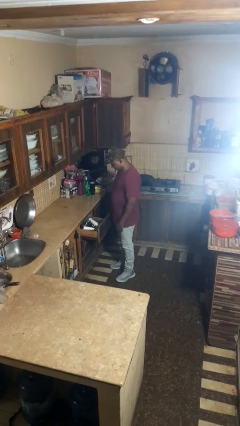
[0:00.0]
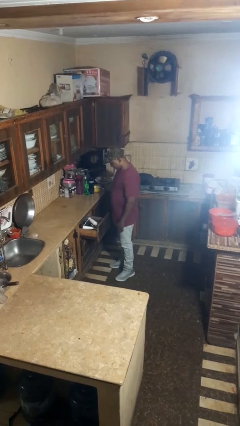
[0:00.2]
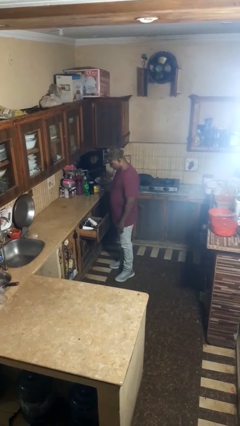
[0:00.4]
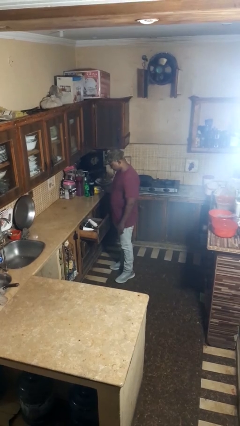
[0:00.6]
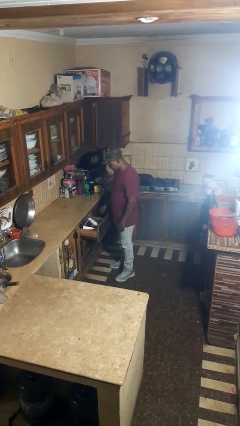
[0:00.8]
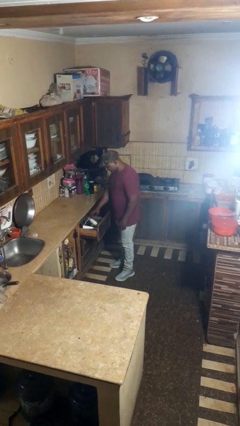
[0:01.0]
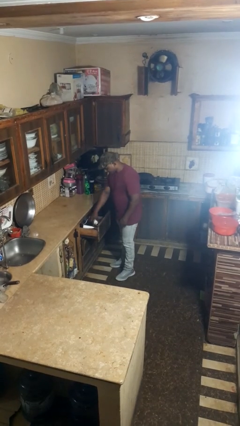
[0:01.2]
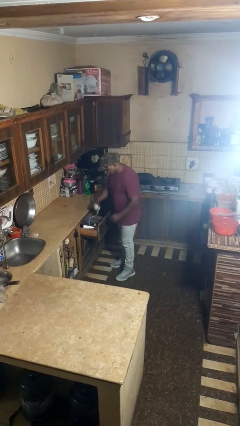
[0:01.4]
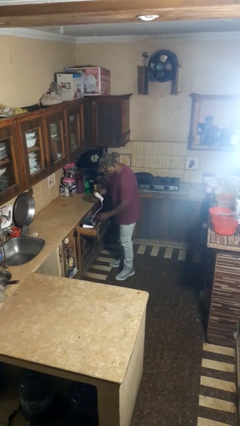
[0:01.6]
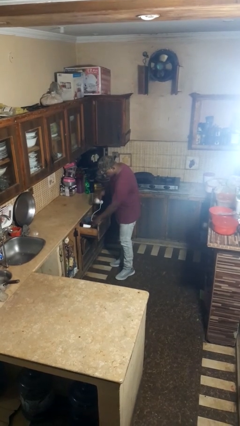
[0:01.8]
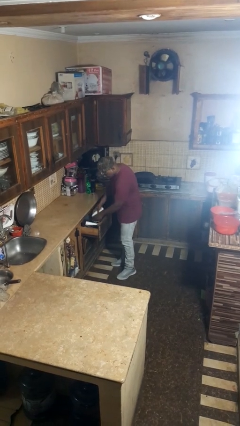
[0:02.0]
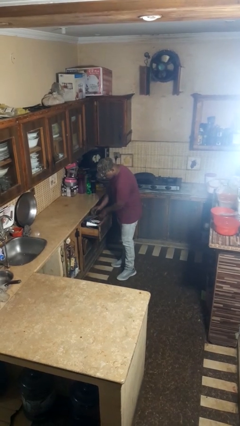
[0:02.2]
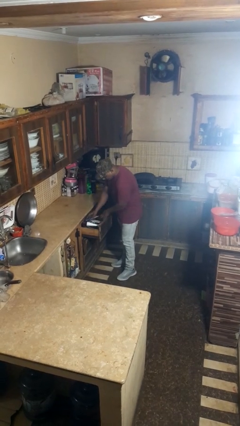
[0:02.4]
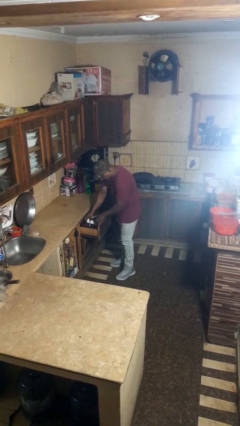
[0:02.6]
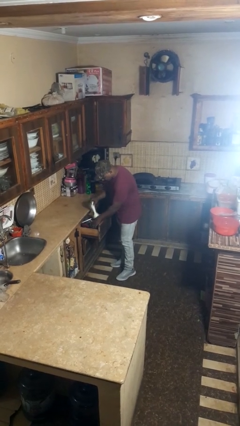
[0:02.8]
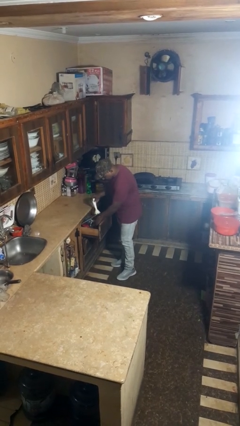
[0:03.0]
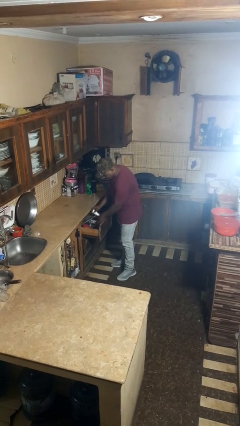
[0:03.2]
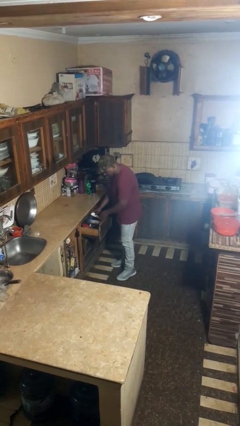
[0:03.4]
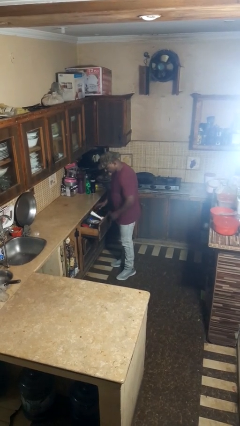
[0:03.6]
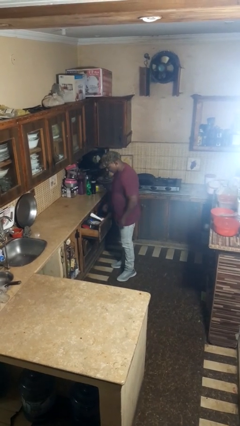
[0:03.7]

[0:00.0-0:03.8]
person searches in kitchen drawer

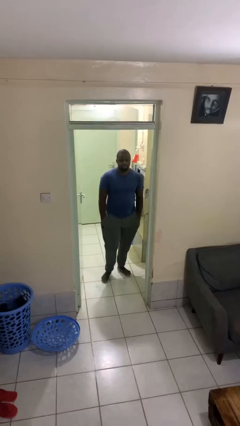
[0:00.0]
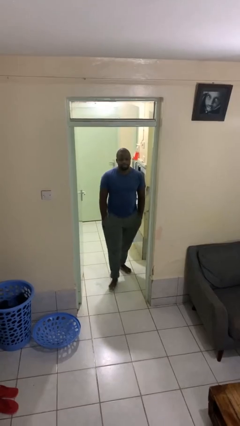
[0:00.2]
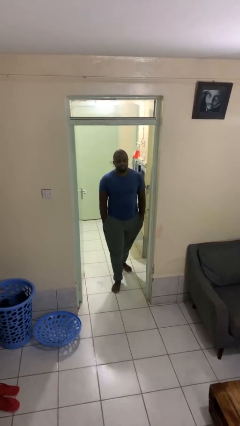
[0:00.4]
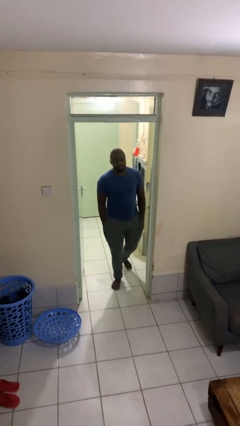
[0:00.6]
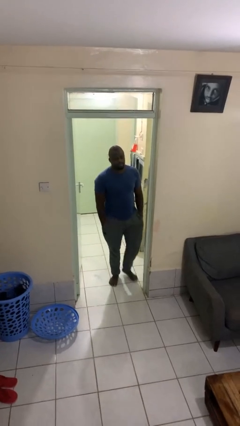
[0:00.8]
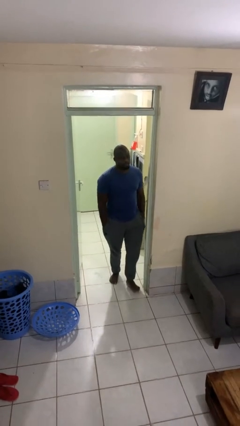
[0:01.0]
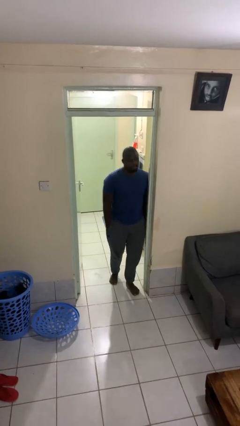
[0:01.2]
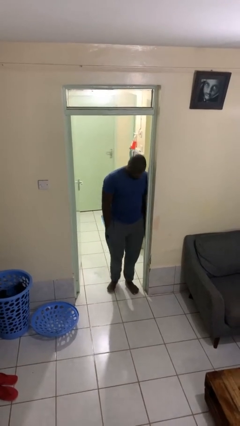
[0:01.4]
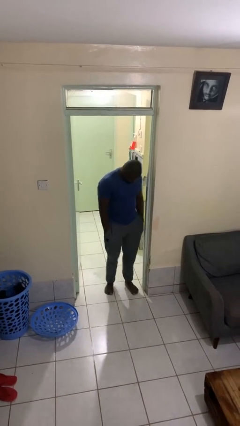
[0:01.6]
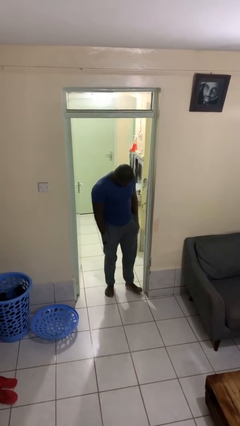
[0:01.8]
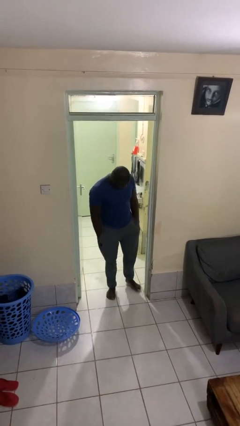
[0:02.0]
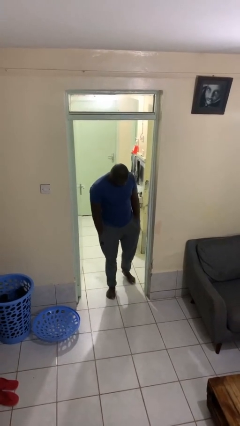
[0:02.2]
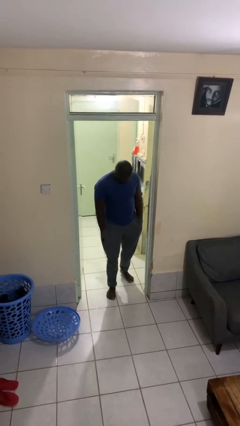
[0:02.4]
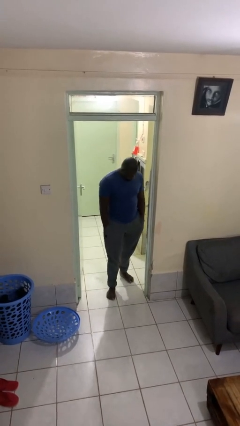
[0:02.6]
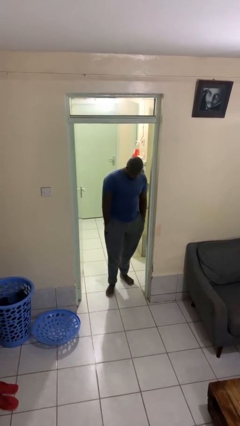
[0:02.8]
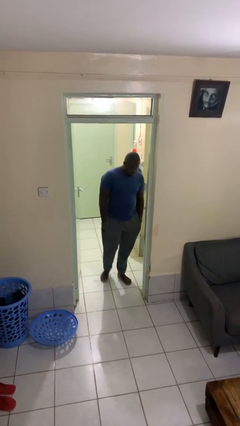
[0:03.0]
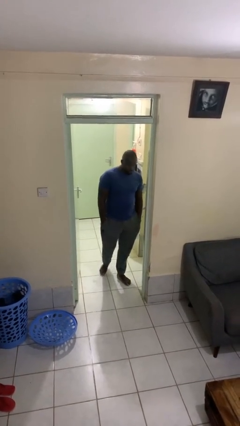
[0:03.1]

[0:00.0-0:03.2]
person bumps into wall

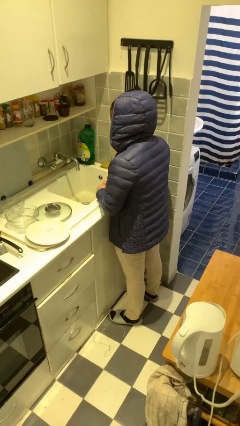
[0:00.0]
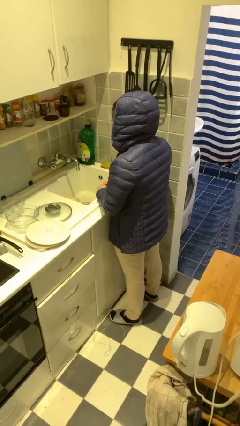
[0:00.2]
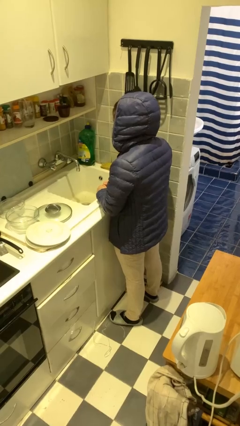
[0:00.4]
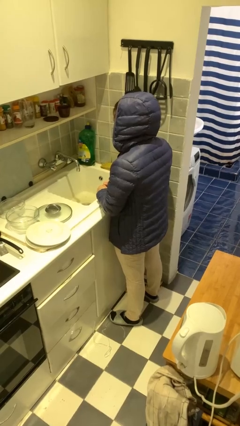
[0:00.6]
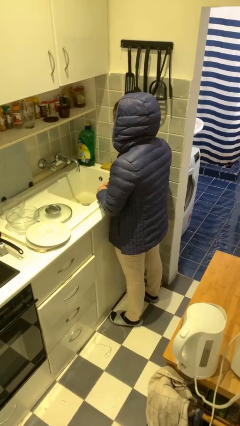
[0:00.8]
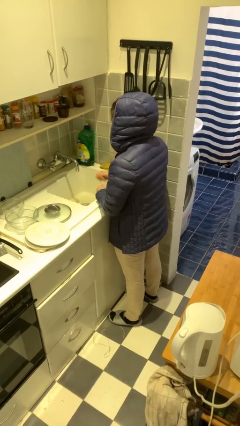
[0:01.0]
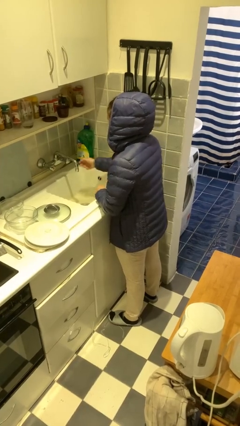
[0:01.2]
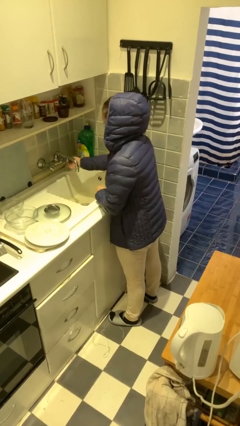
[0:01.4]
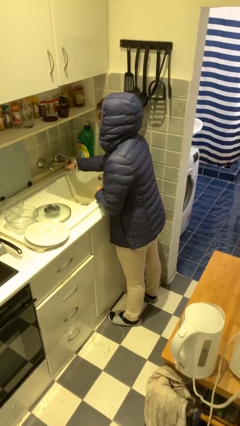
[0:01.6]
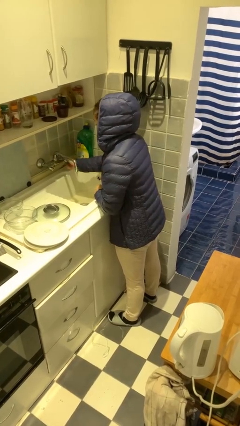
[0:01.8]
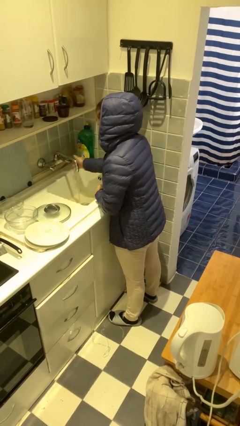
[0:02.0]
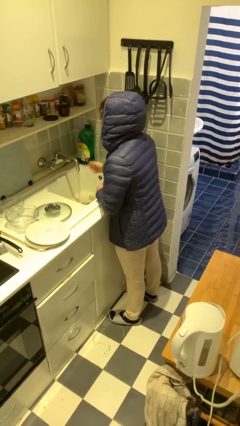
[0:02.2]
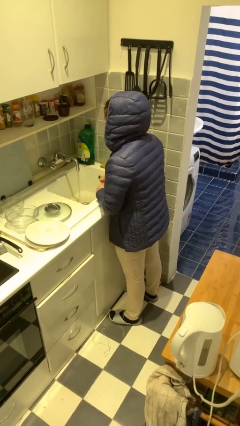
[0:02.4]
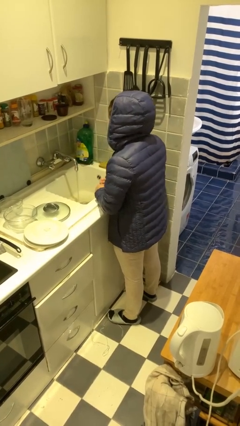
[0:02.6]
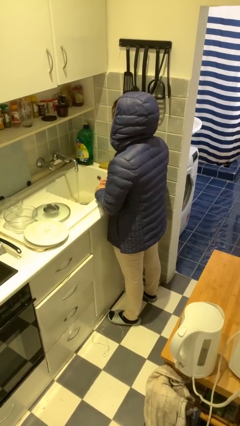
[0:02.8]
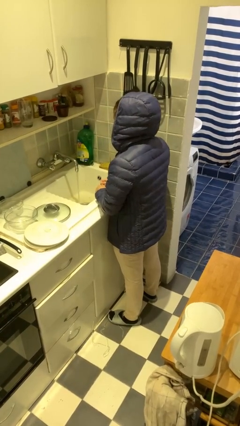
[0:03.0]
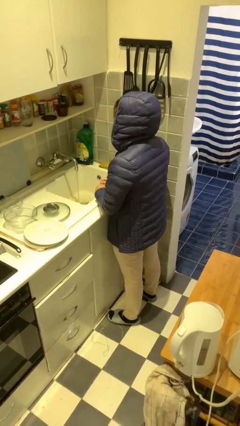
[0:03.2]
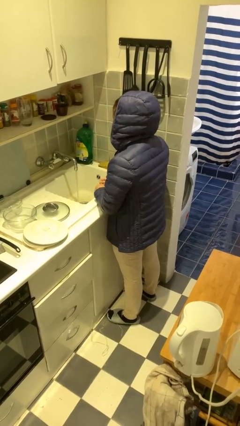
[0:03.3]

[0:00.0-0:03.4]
person turns on faucet

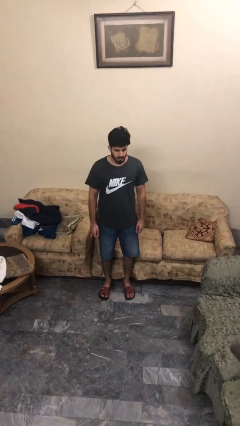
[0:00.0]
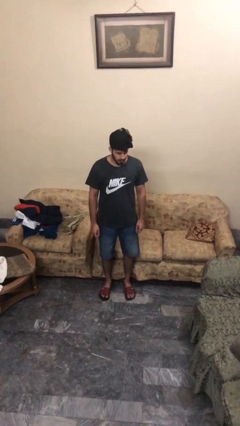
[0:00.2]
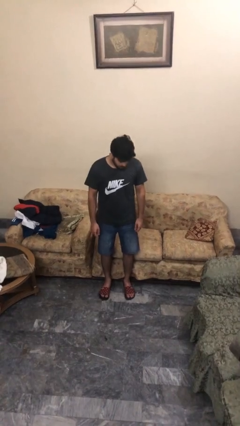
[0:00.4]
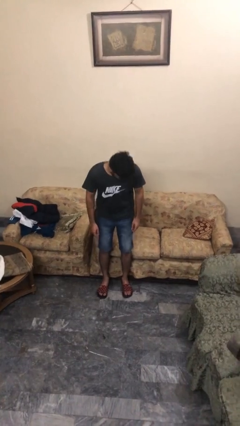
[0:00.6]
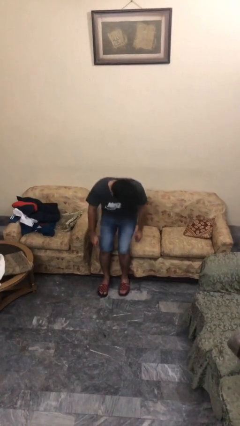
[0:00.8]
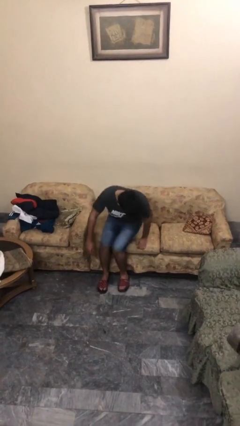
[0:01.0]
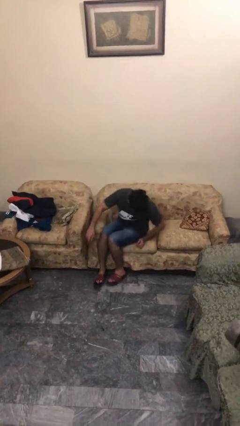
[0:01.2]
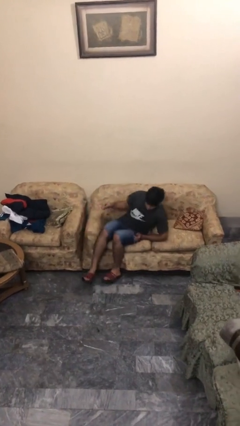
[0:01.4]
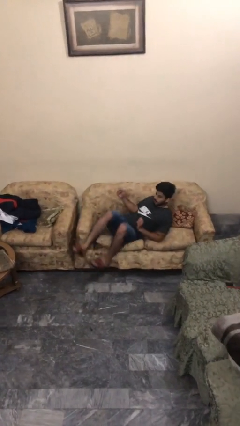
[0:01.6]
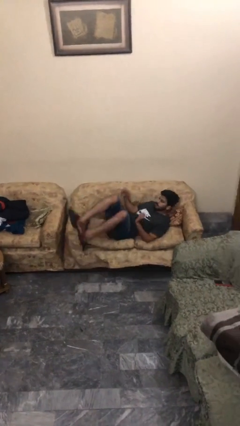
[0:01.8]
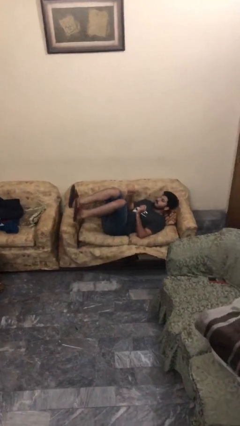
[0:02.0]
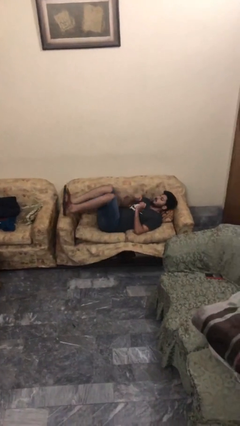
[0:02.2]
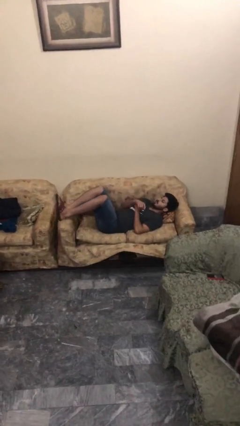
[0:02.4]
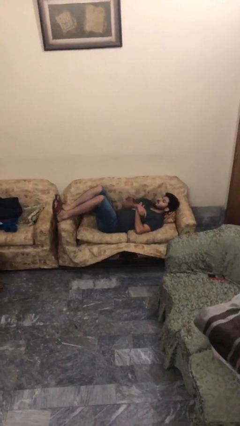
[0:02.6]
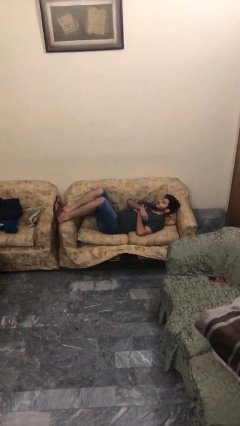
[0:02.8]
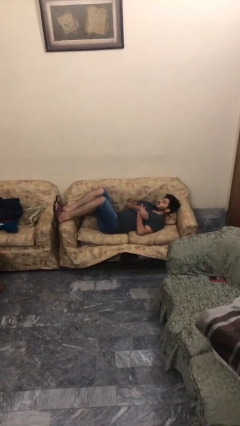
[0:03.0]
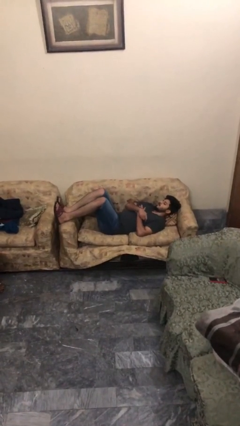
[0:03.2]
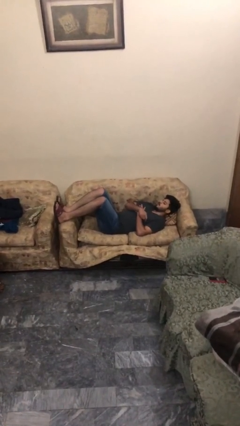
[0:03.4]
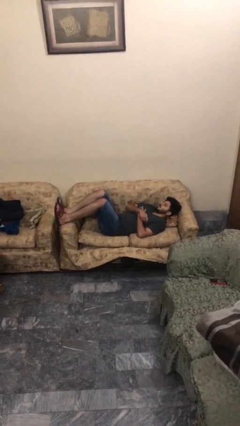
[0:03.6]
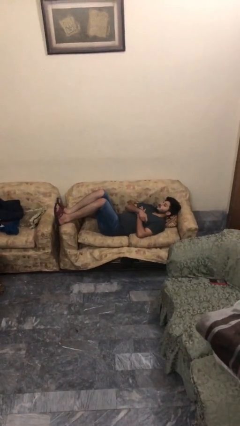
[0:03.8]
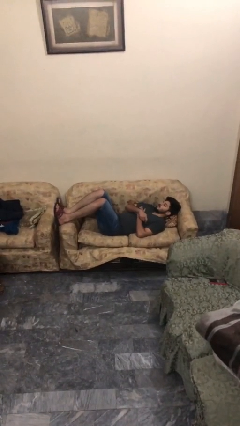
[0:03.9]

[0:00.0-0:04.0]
person lies down on couch

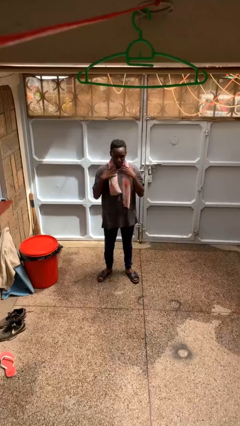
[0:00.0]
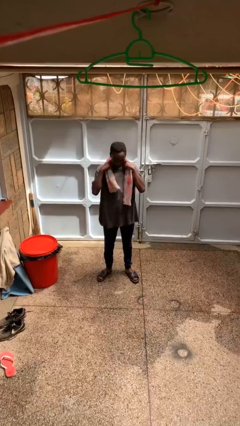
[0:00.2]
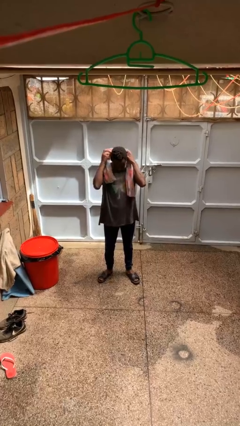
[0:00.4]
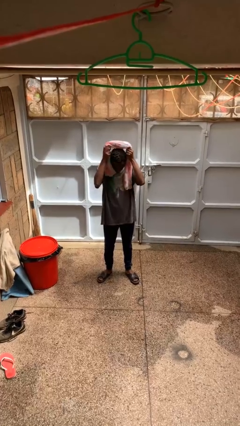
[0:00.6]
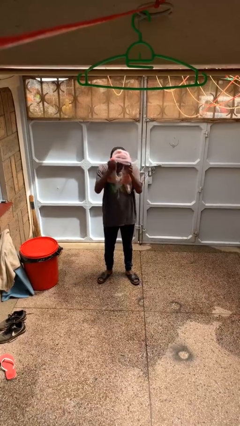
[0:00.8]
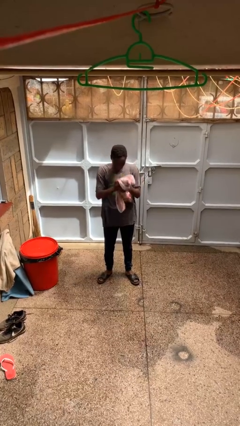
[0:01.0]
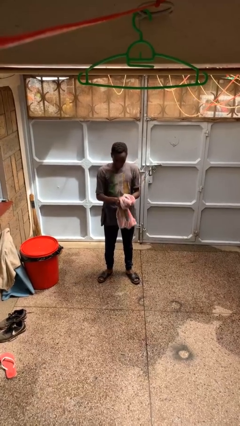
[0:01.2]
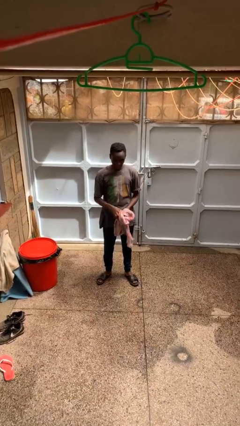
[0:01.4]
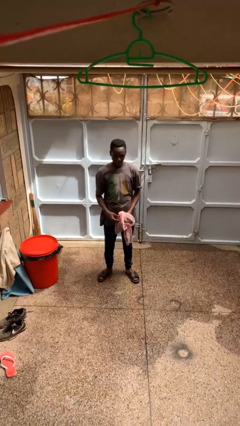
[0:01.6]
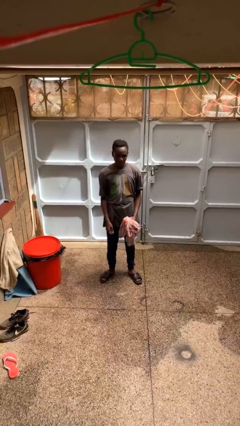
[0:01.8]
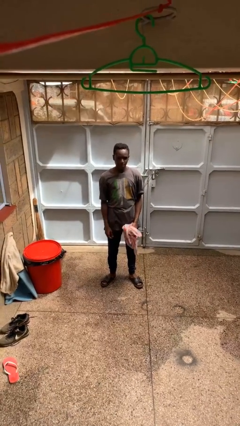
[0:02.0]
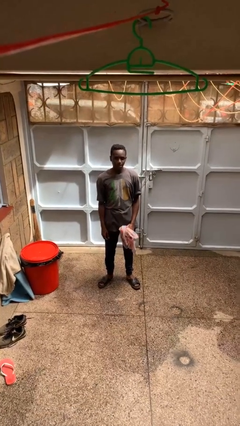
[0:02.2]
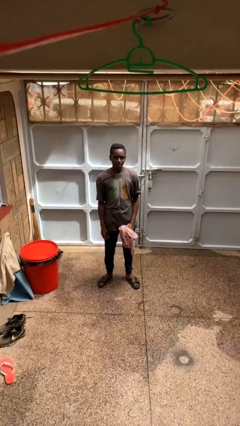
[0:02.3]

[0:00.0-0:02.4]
person takes off scarf

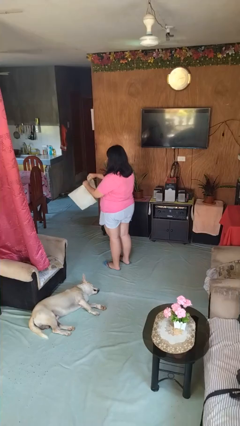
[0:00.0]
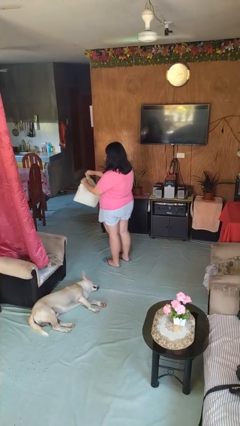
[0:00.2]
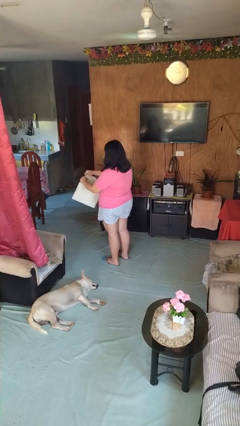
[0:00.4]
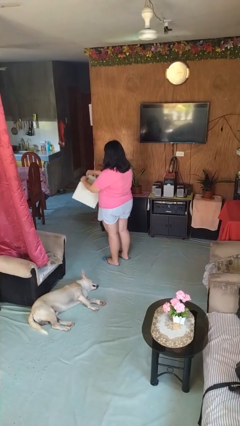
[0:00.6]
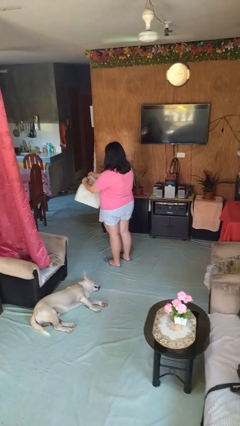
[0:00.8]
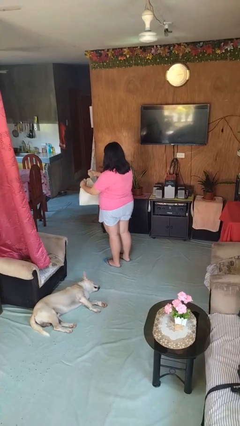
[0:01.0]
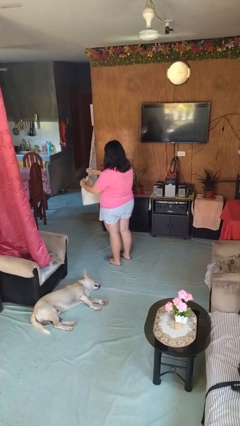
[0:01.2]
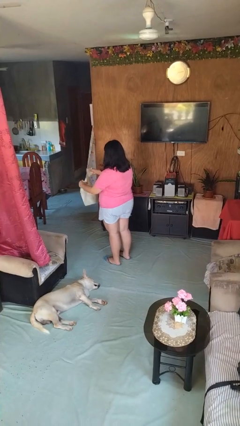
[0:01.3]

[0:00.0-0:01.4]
person tears paper
